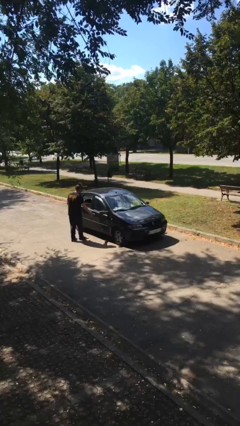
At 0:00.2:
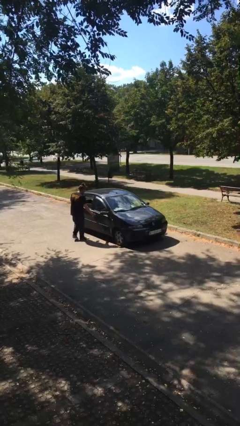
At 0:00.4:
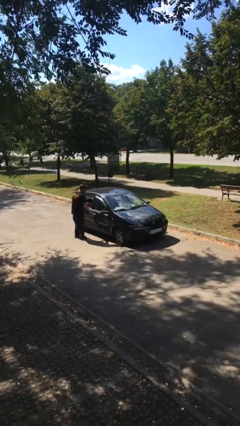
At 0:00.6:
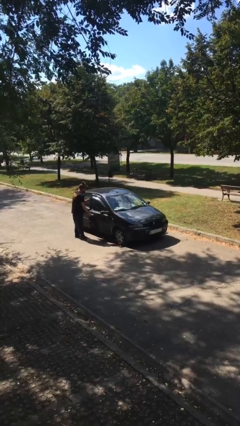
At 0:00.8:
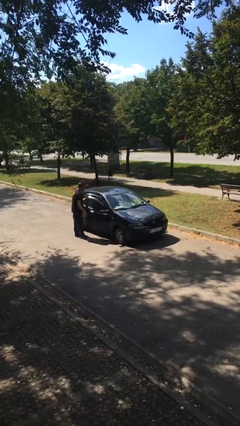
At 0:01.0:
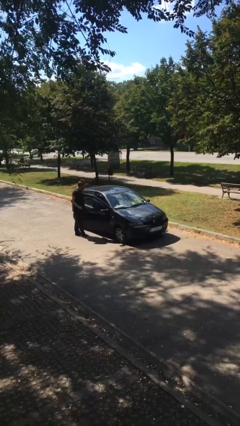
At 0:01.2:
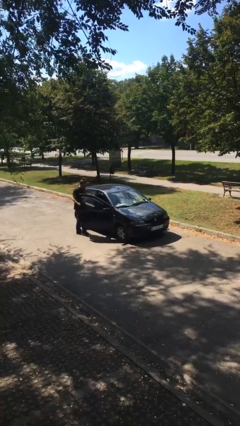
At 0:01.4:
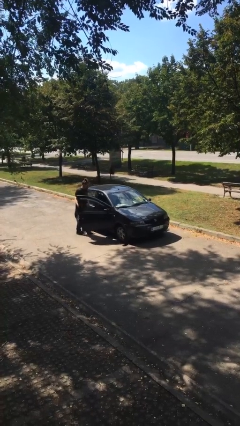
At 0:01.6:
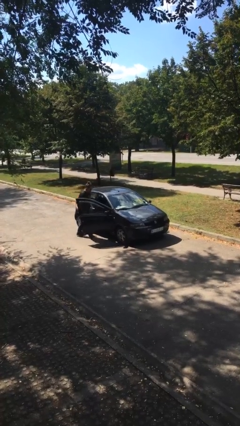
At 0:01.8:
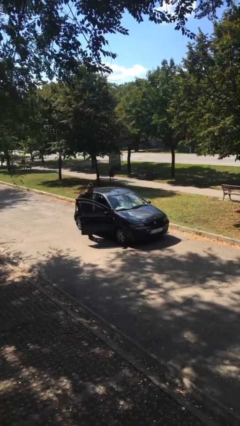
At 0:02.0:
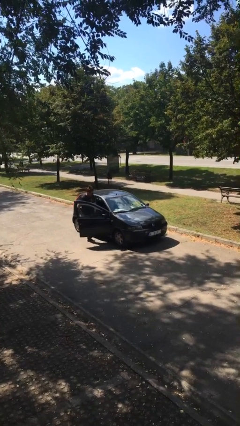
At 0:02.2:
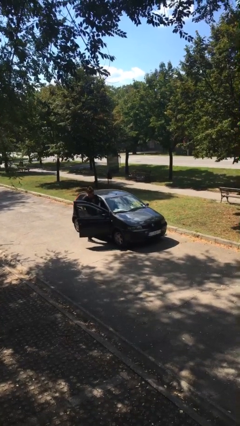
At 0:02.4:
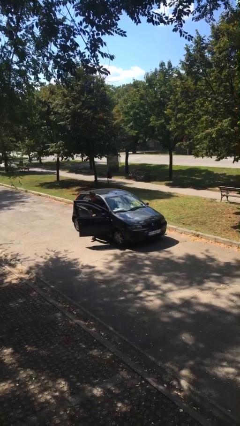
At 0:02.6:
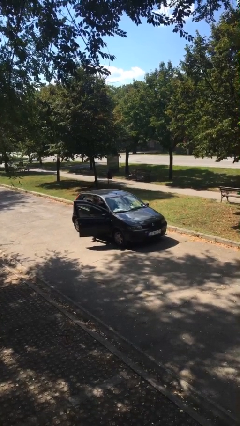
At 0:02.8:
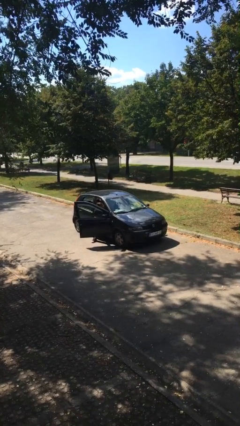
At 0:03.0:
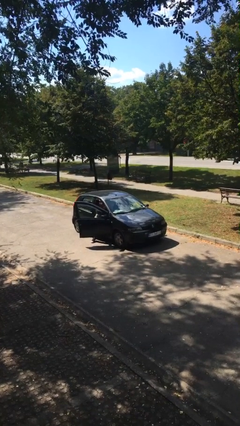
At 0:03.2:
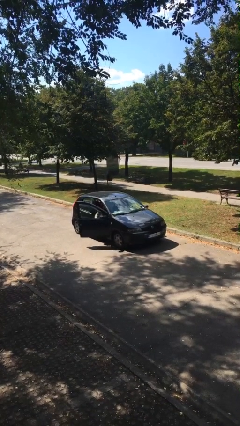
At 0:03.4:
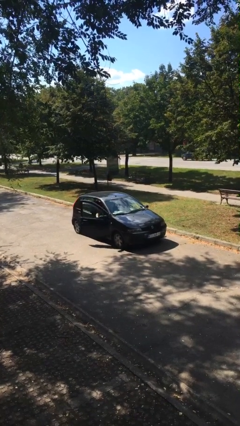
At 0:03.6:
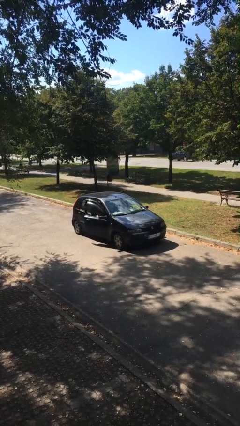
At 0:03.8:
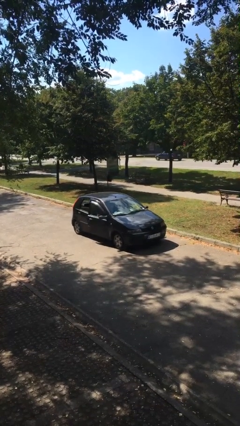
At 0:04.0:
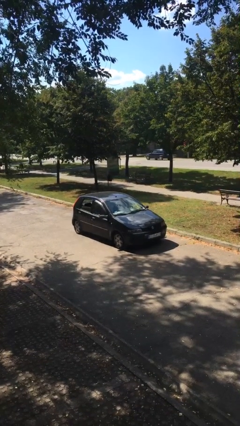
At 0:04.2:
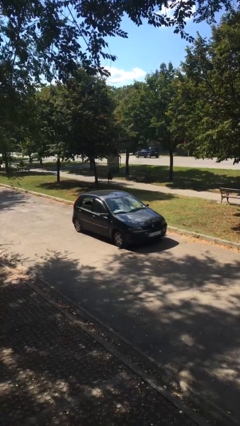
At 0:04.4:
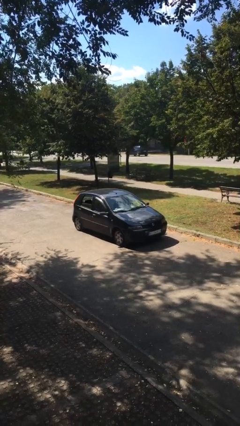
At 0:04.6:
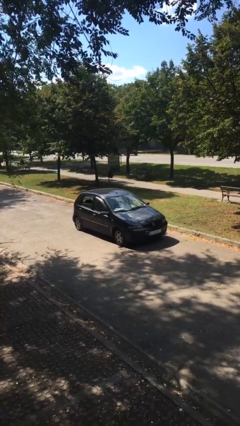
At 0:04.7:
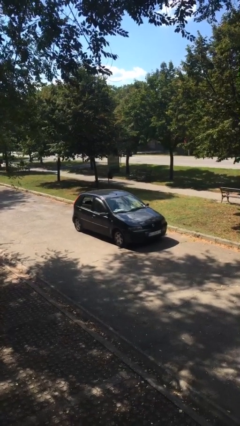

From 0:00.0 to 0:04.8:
car picks up person

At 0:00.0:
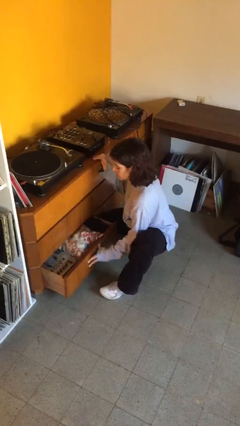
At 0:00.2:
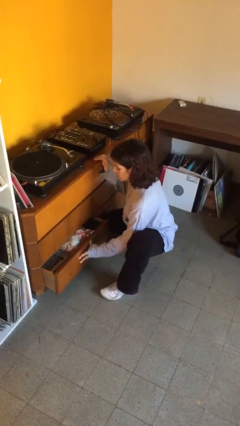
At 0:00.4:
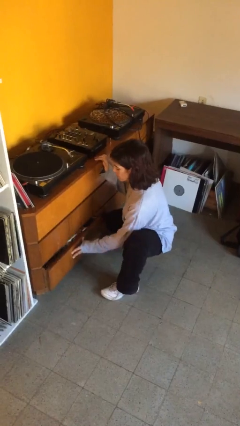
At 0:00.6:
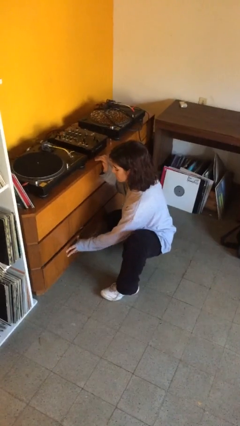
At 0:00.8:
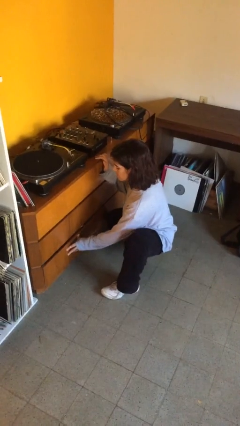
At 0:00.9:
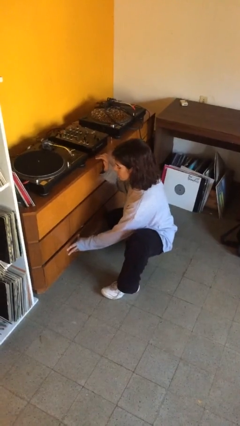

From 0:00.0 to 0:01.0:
person closes dresser drawer

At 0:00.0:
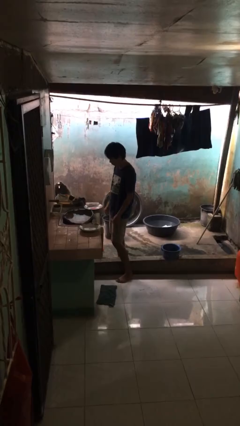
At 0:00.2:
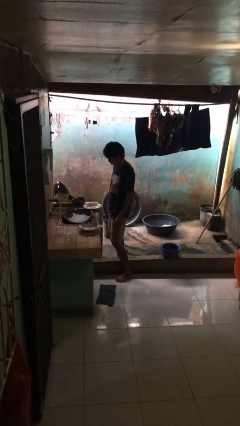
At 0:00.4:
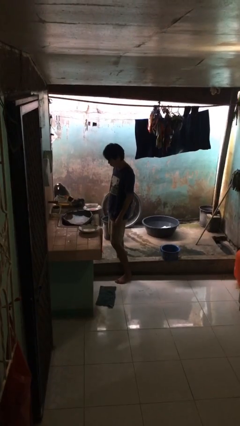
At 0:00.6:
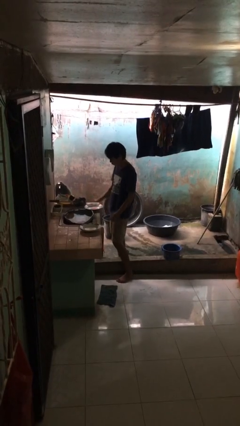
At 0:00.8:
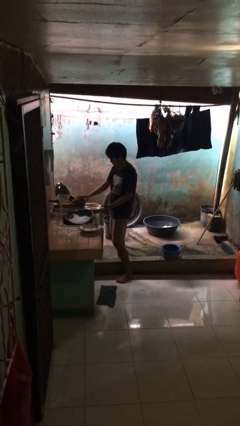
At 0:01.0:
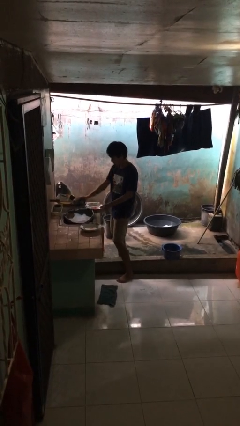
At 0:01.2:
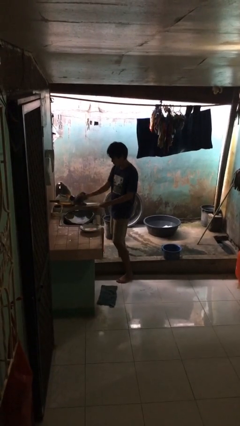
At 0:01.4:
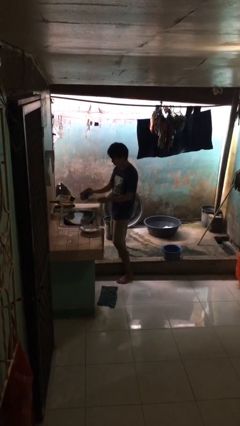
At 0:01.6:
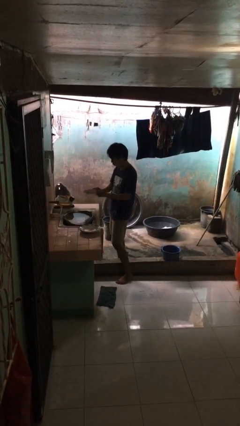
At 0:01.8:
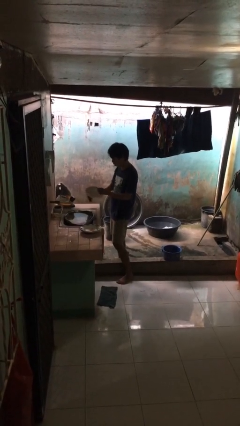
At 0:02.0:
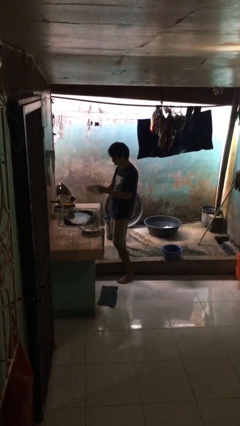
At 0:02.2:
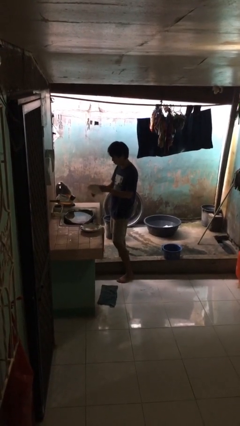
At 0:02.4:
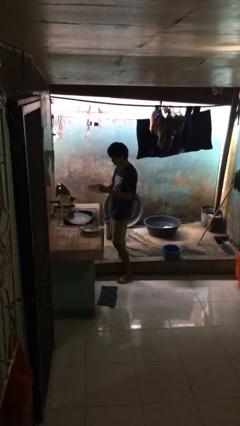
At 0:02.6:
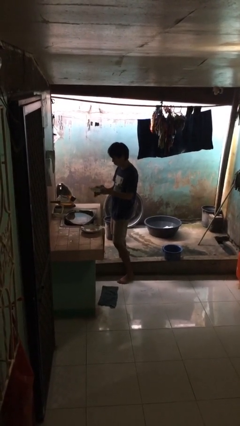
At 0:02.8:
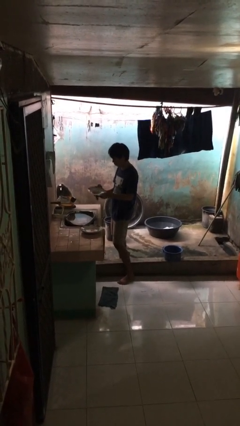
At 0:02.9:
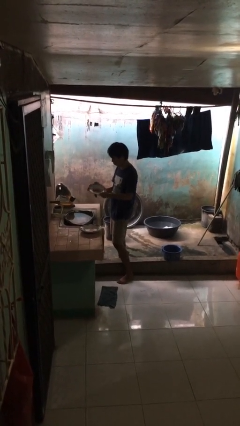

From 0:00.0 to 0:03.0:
person dries dish

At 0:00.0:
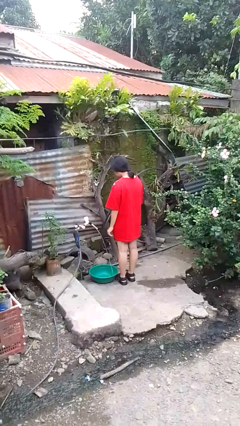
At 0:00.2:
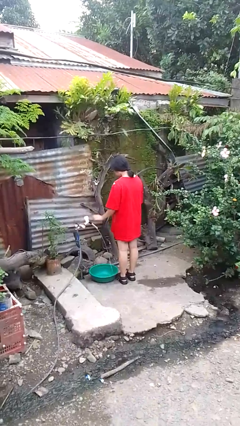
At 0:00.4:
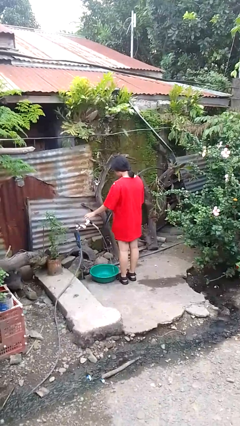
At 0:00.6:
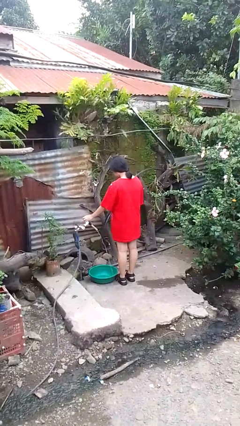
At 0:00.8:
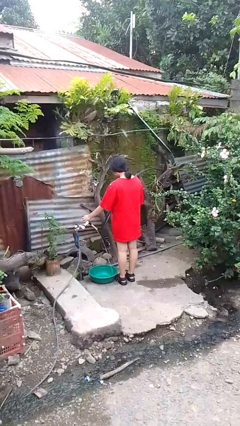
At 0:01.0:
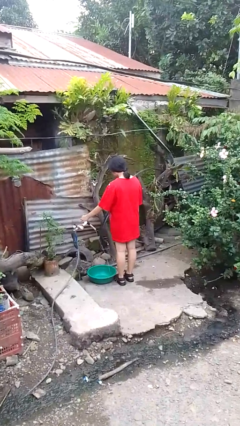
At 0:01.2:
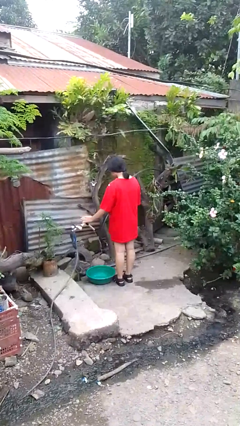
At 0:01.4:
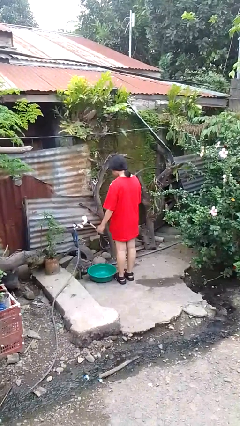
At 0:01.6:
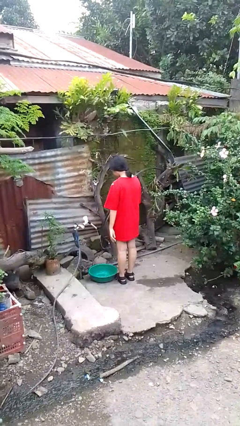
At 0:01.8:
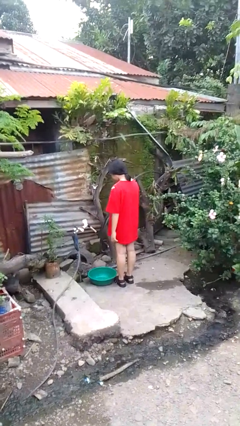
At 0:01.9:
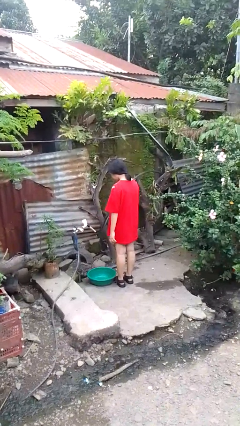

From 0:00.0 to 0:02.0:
person turns off faucet

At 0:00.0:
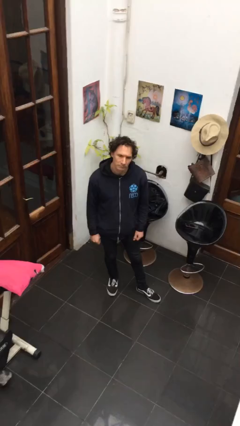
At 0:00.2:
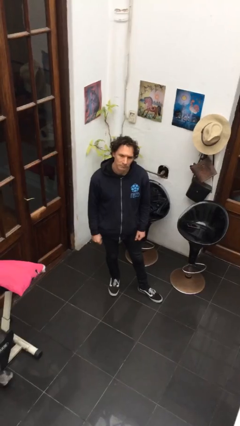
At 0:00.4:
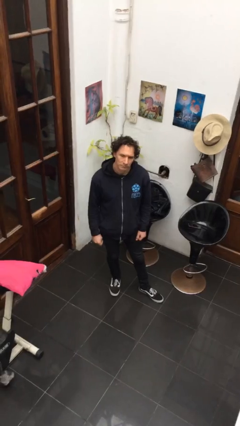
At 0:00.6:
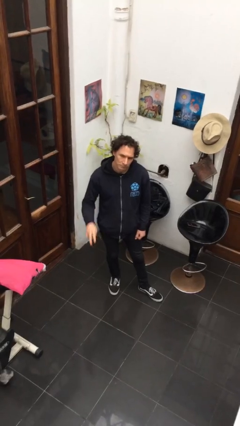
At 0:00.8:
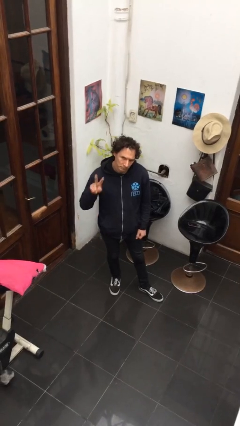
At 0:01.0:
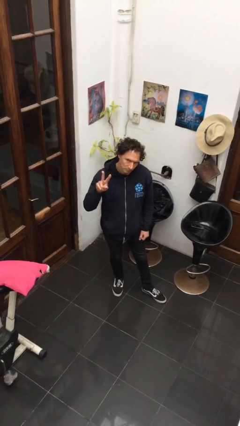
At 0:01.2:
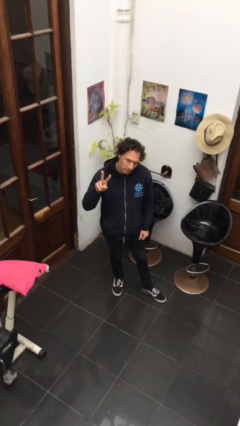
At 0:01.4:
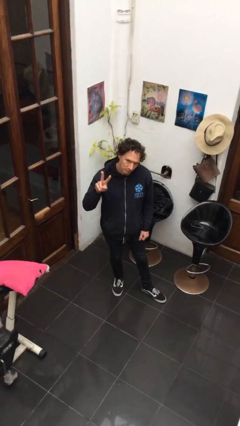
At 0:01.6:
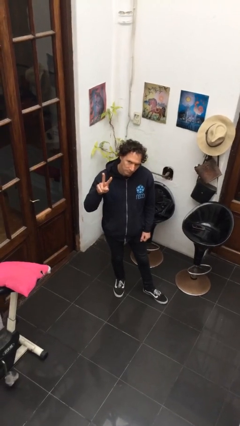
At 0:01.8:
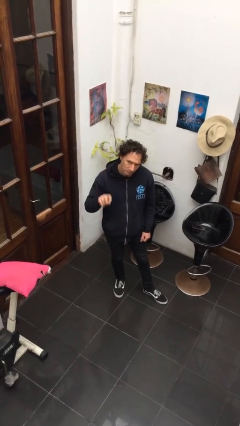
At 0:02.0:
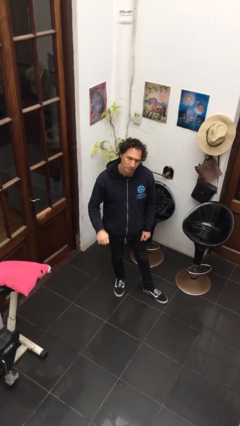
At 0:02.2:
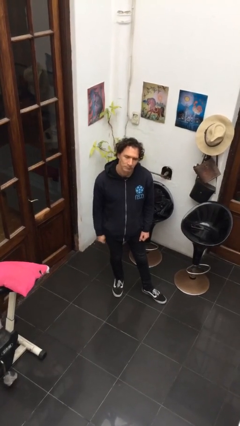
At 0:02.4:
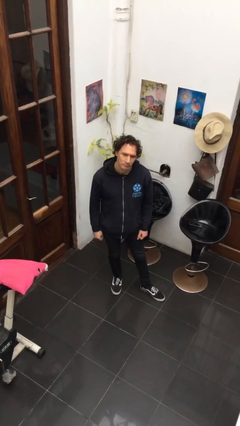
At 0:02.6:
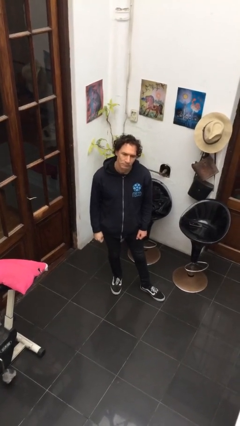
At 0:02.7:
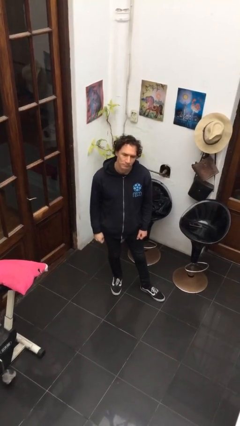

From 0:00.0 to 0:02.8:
person gestures peace

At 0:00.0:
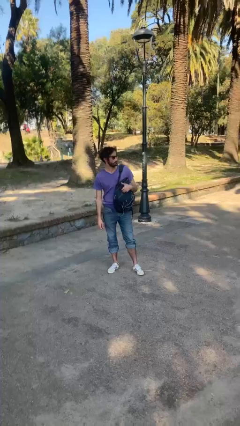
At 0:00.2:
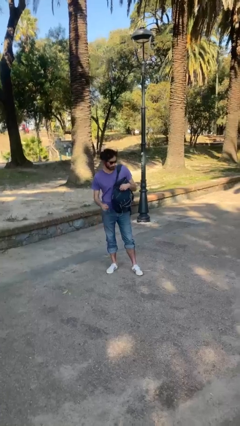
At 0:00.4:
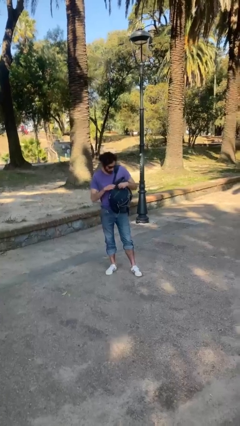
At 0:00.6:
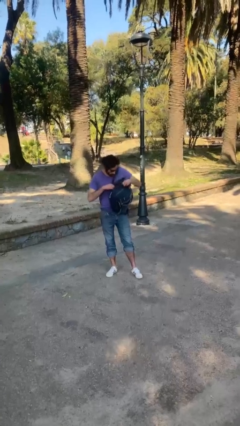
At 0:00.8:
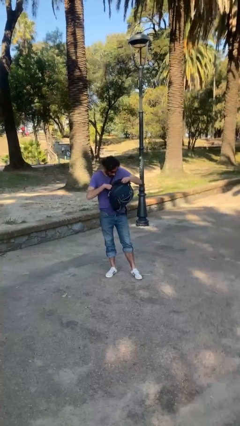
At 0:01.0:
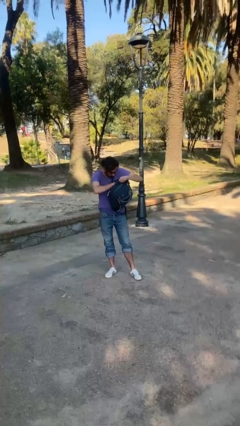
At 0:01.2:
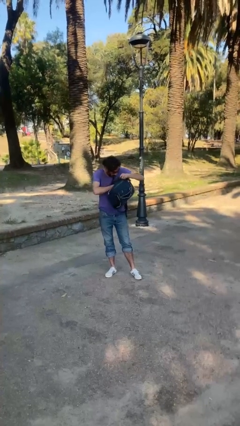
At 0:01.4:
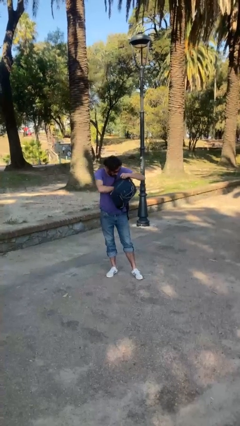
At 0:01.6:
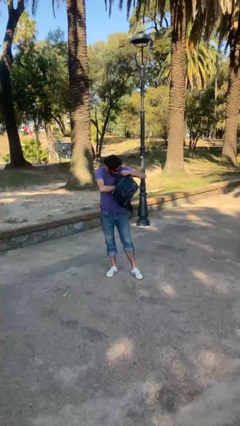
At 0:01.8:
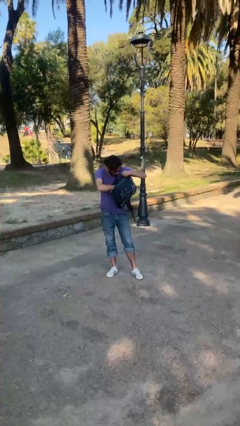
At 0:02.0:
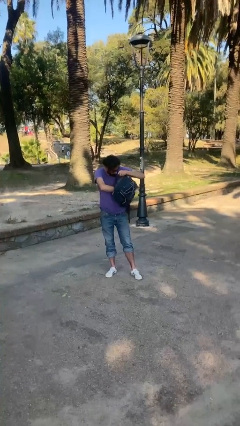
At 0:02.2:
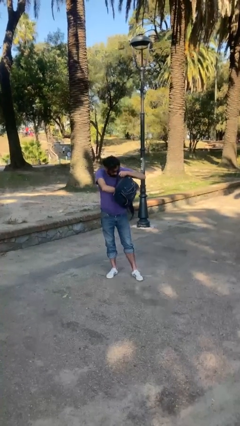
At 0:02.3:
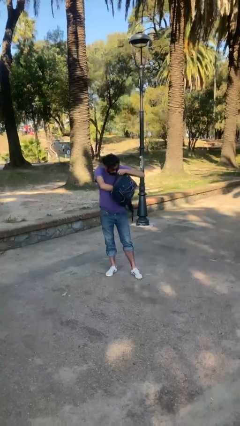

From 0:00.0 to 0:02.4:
person searches in backpack

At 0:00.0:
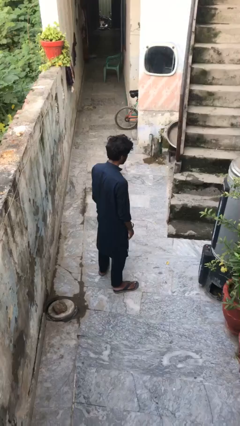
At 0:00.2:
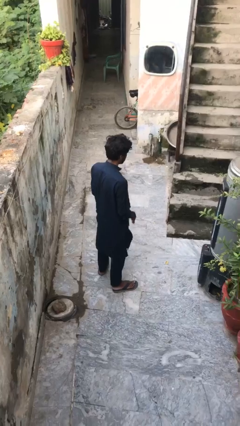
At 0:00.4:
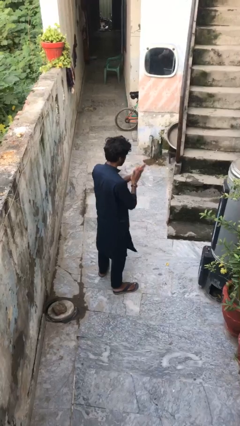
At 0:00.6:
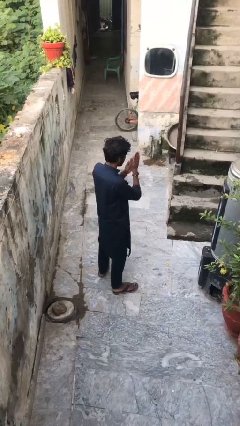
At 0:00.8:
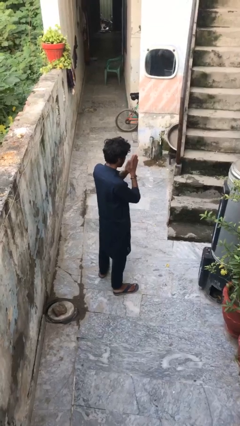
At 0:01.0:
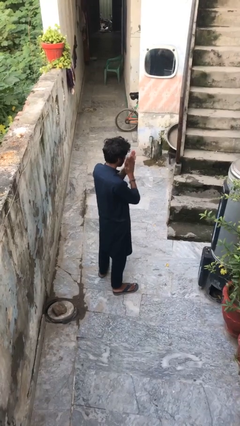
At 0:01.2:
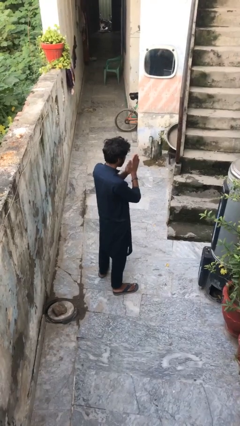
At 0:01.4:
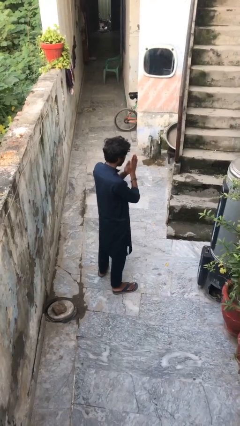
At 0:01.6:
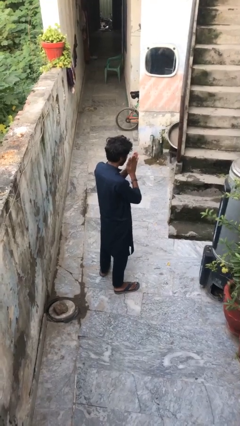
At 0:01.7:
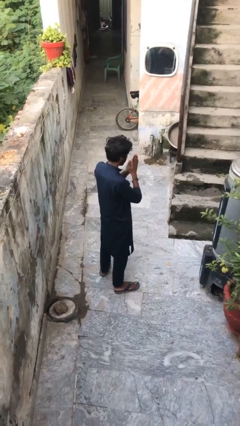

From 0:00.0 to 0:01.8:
person blows into hands
